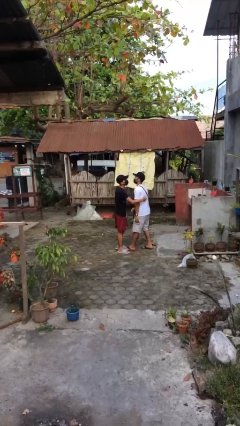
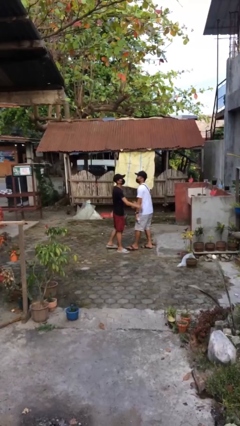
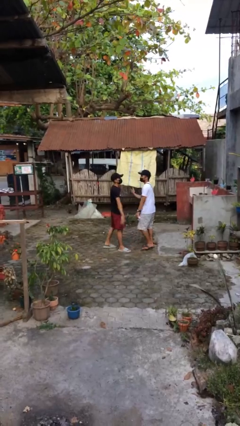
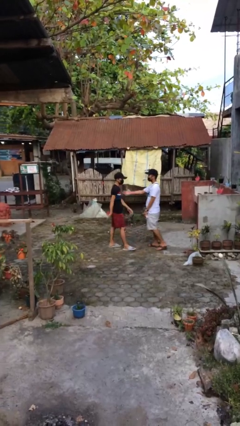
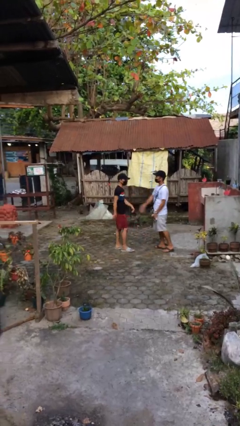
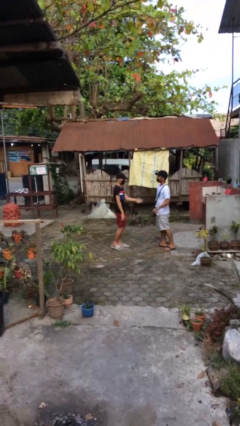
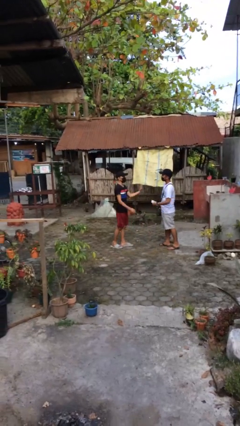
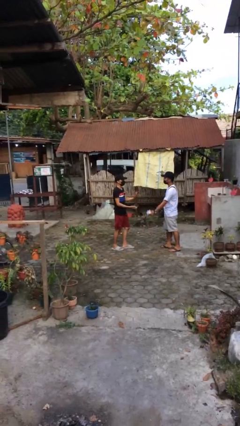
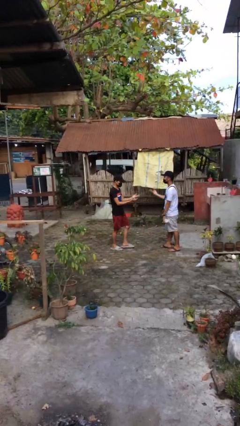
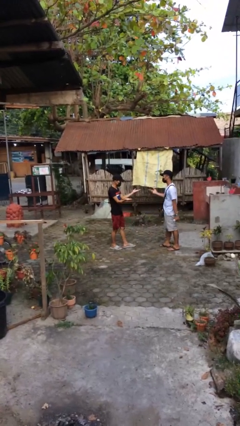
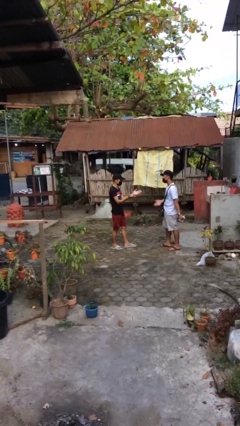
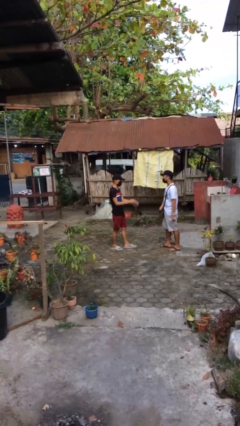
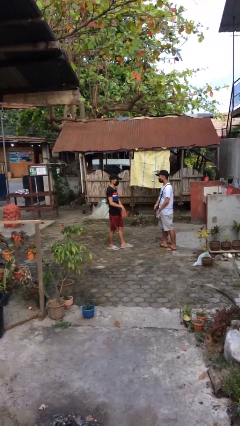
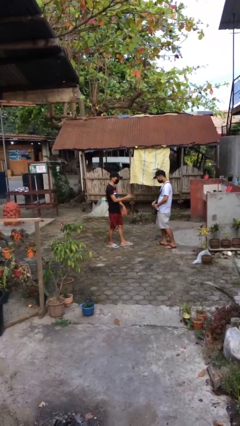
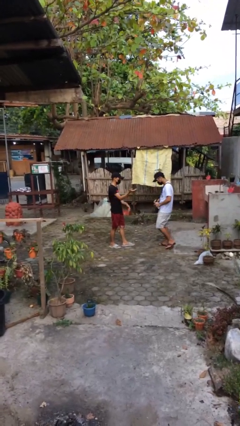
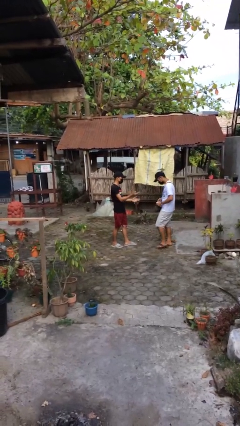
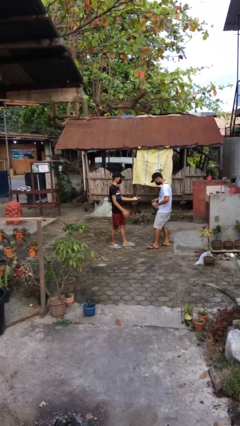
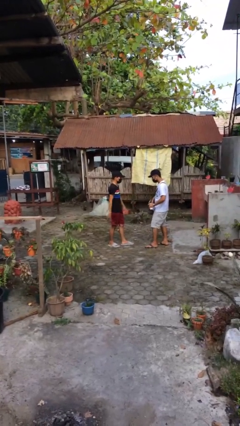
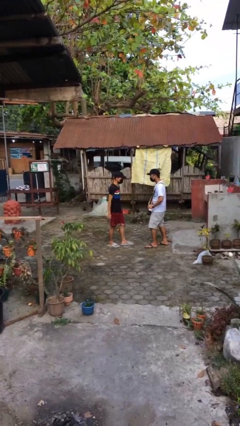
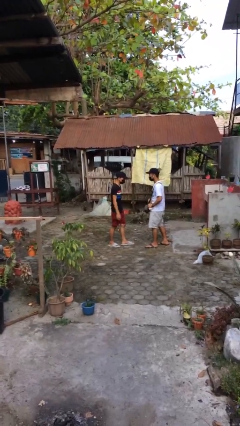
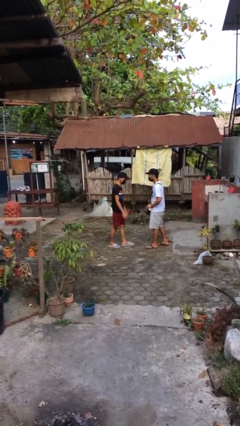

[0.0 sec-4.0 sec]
person talks to person

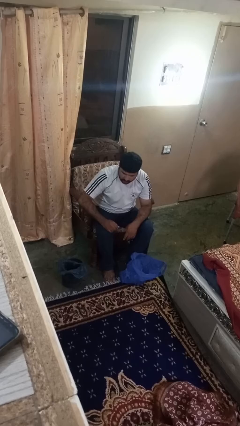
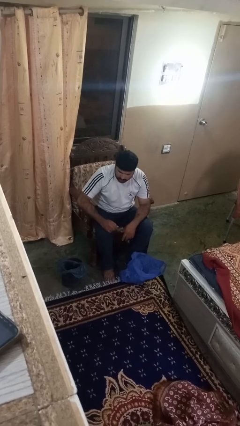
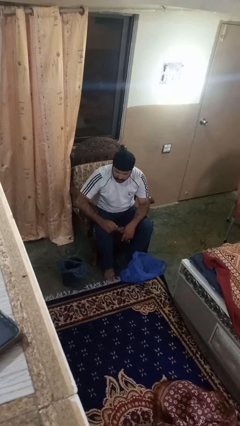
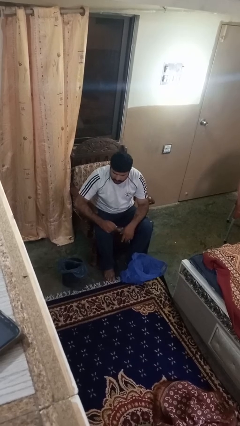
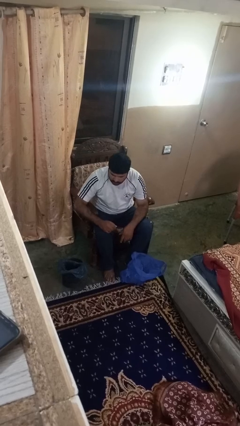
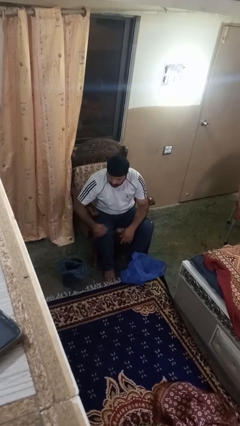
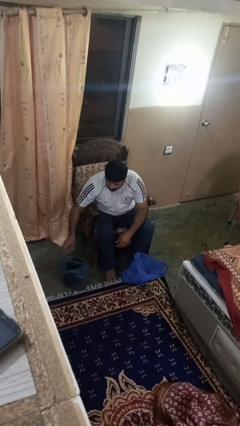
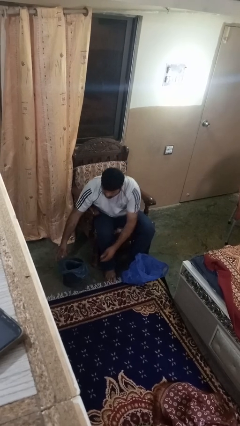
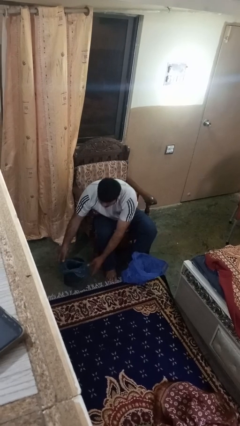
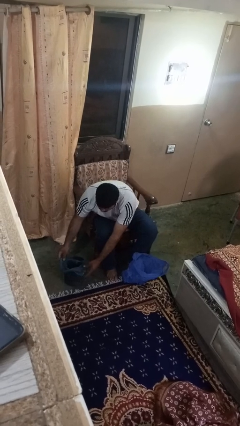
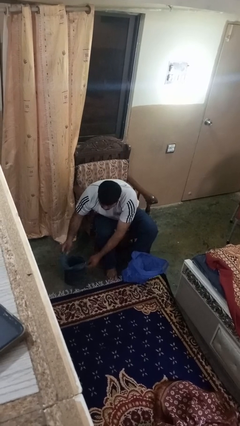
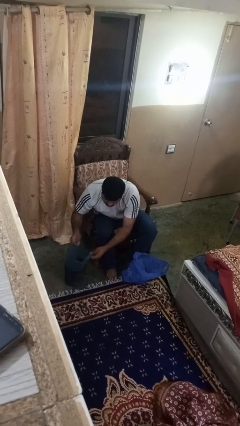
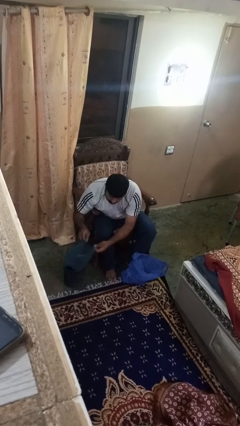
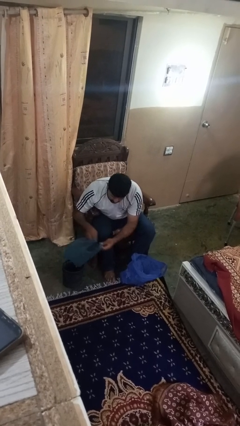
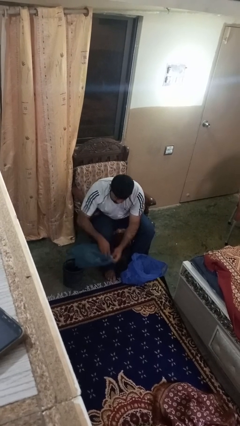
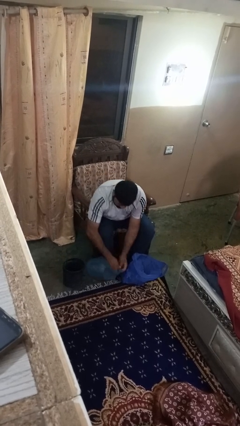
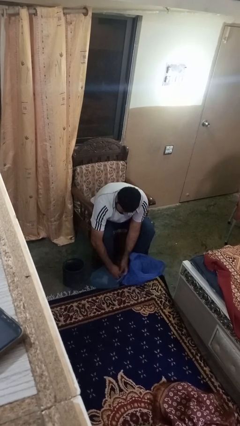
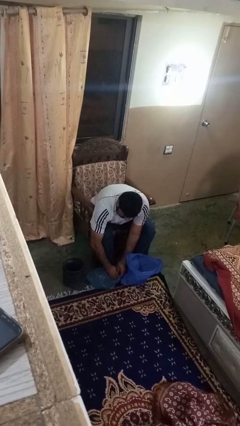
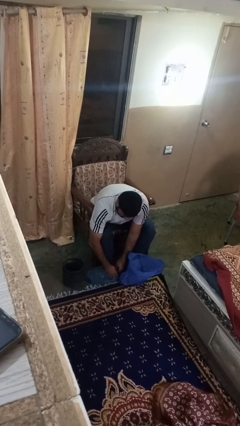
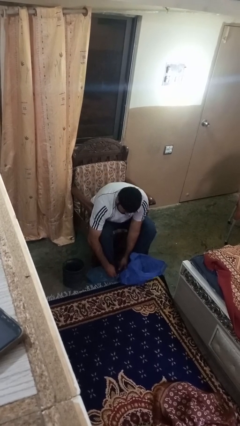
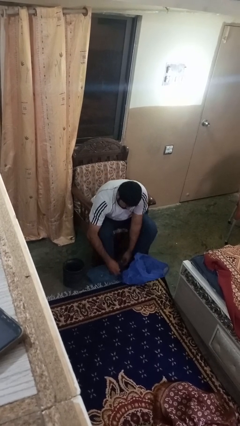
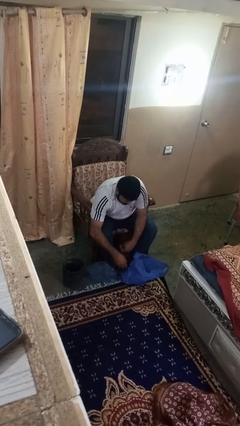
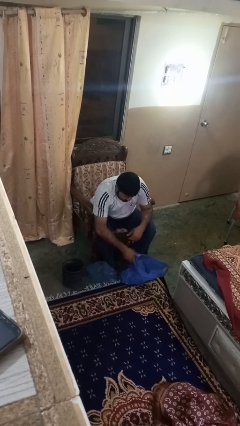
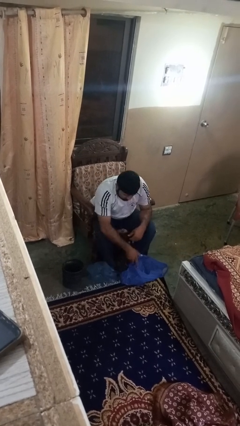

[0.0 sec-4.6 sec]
person removes trashbag from trashcan

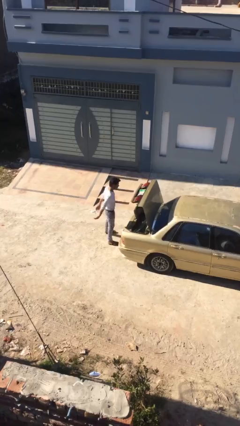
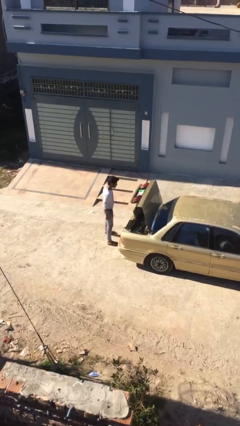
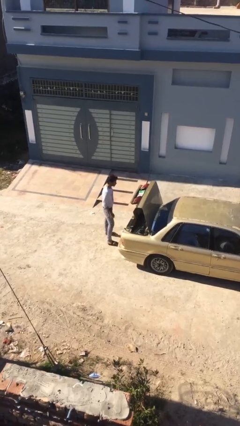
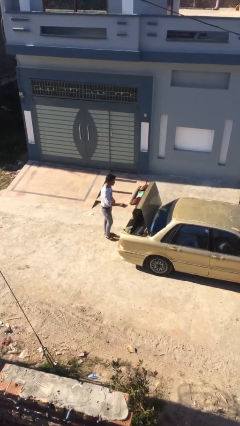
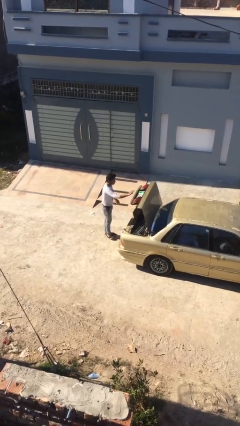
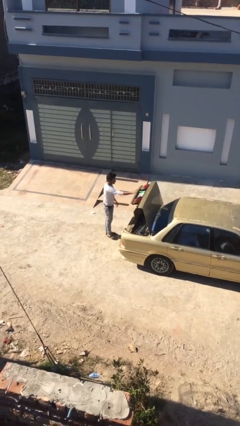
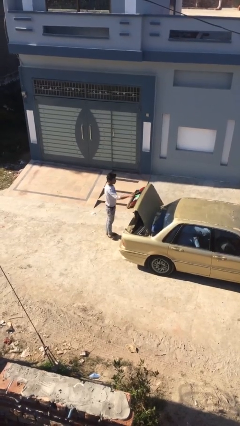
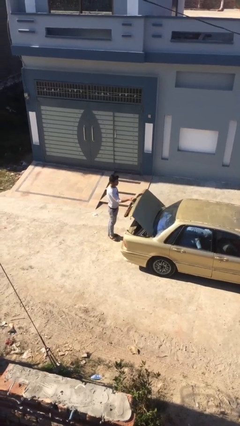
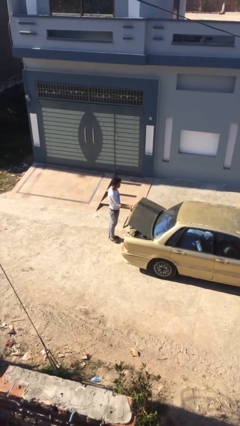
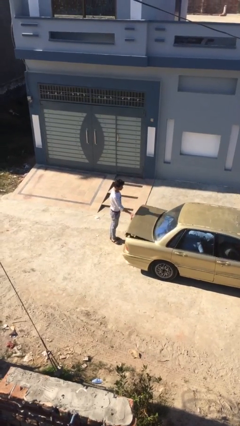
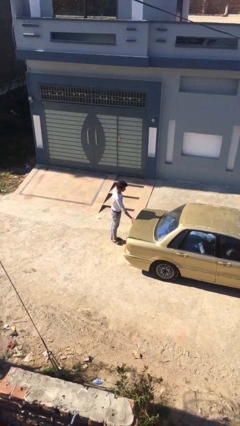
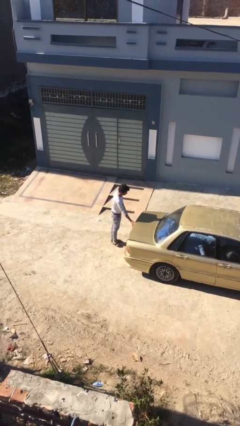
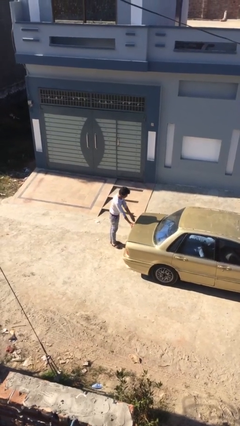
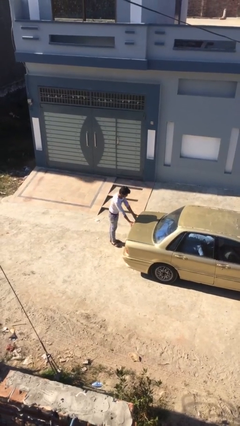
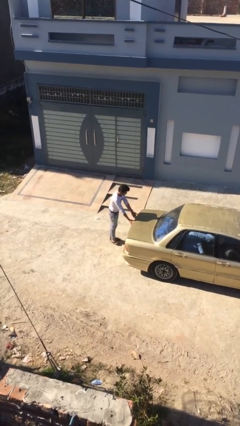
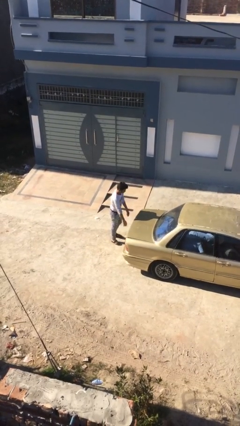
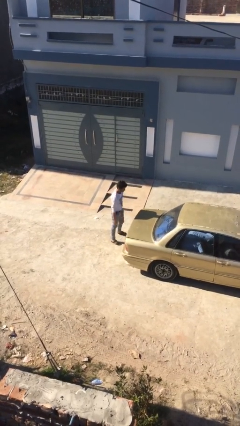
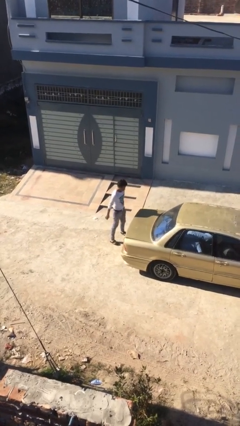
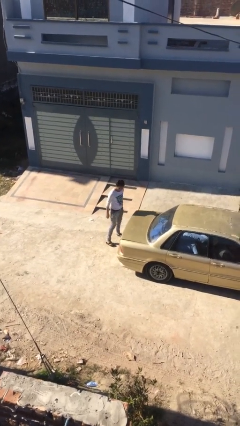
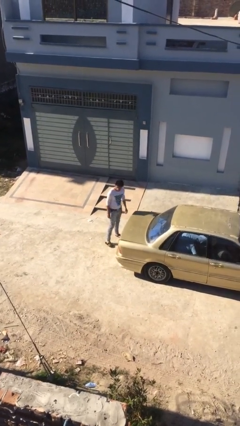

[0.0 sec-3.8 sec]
person closes car trunk

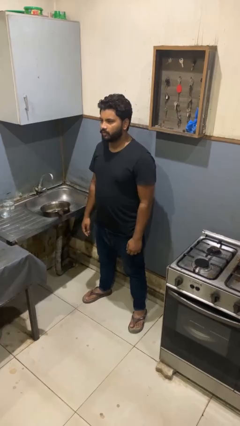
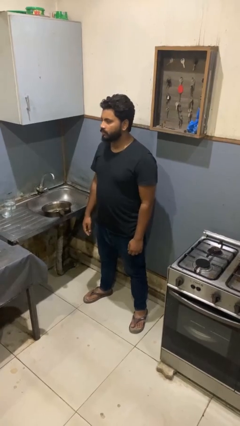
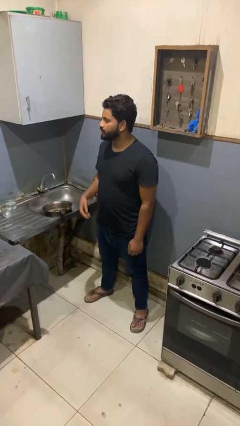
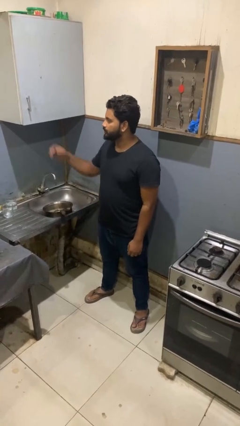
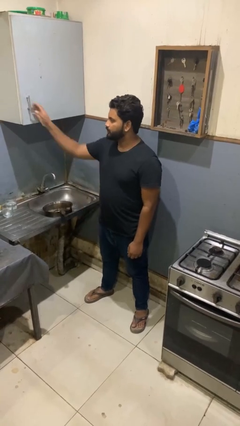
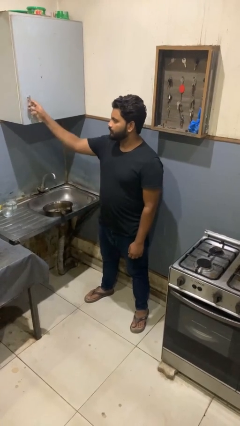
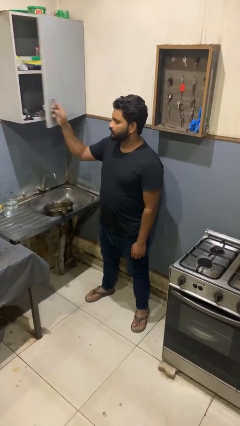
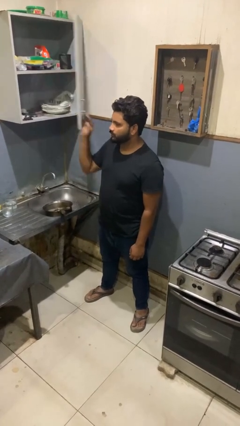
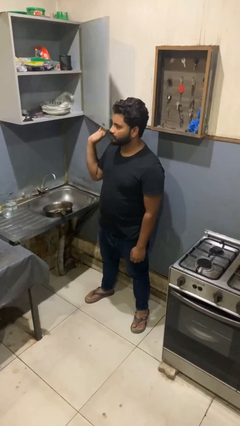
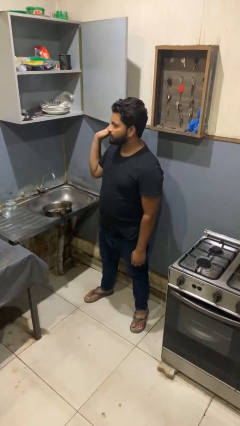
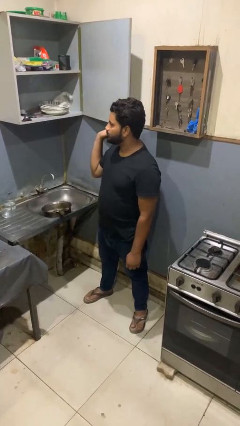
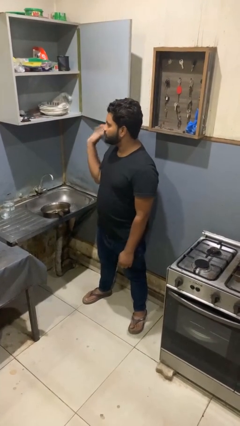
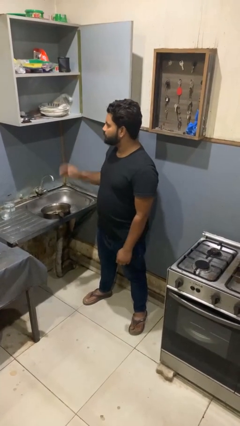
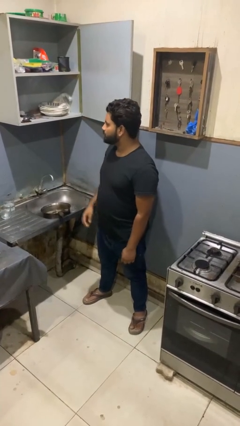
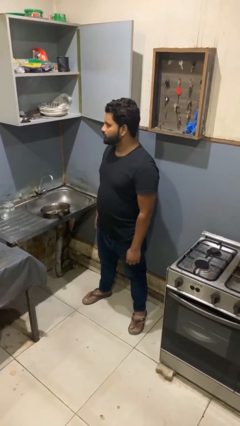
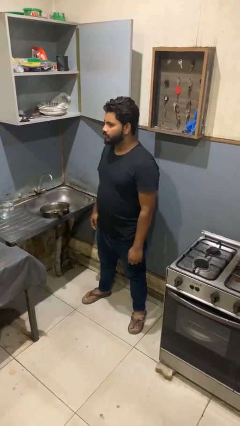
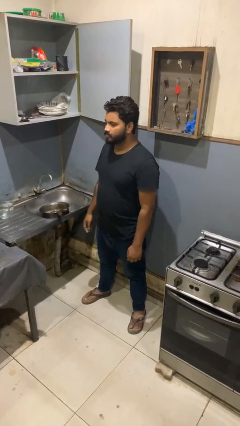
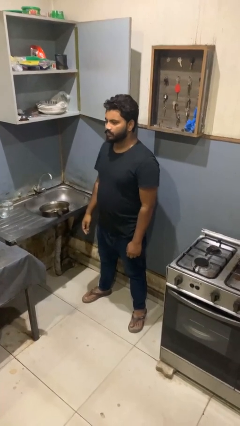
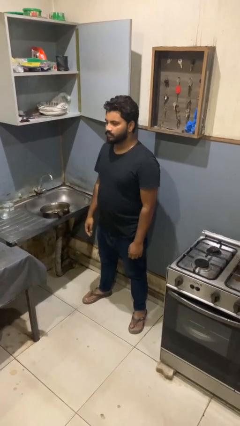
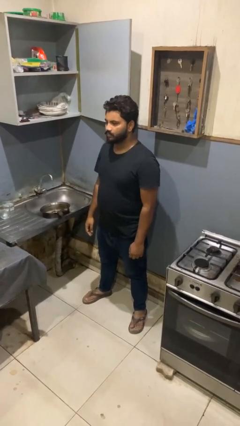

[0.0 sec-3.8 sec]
person opens kitchen drawer

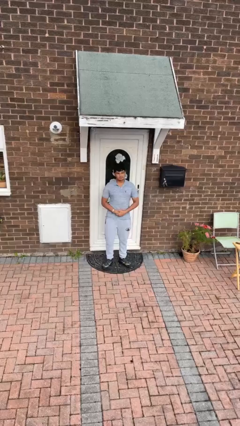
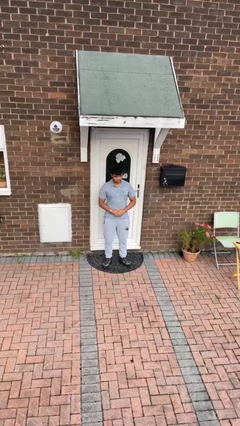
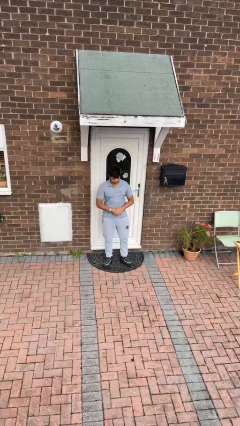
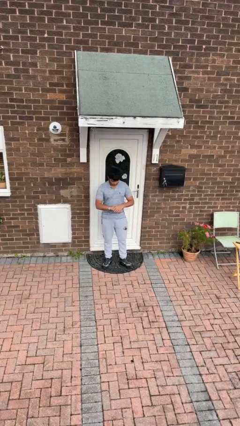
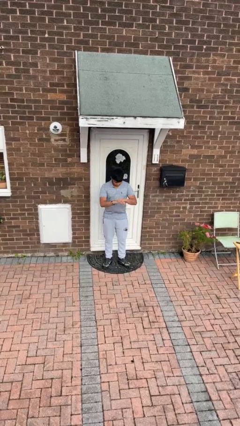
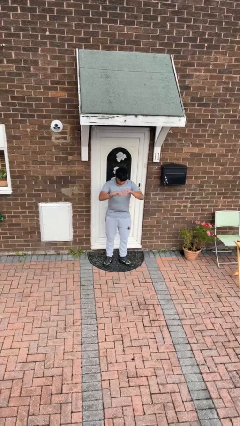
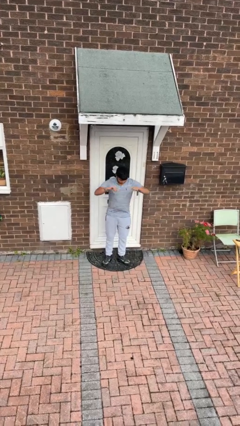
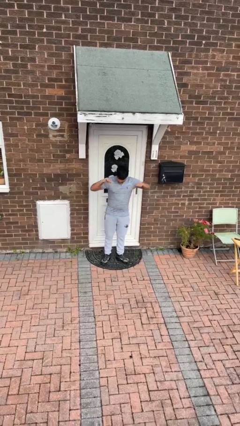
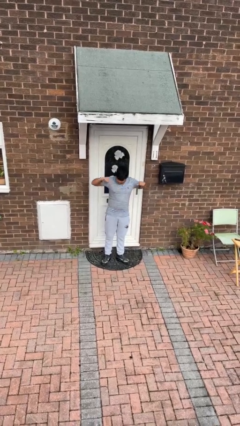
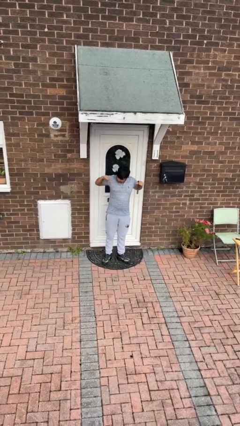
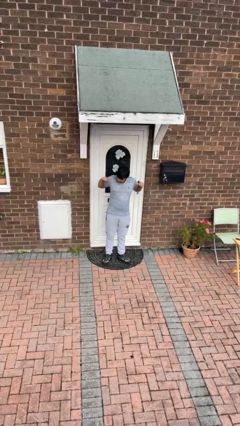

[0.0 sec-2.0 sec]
person stretches arms to side
